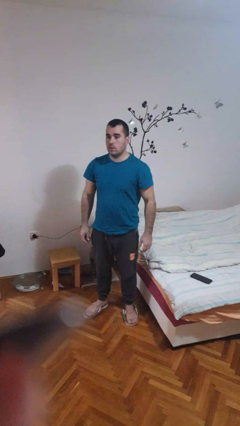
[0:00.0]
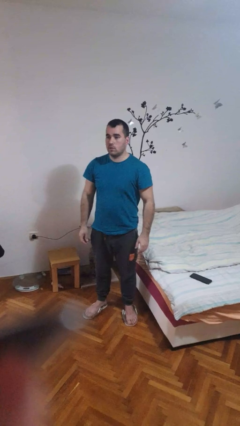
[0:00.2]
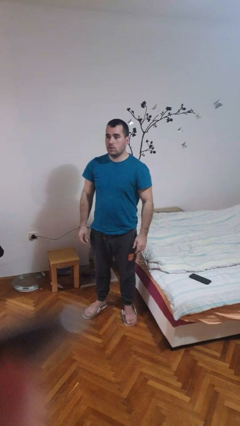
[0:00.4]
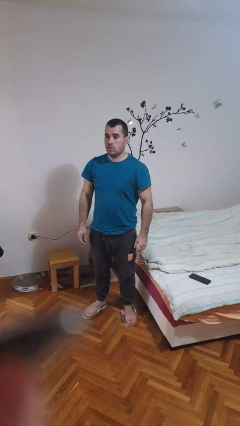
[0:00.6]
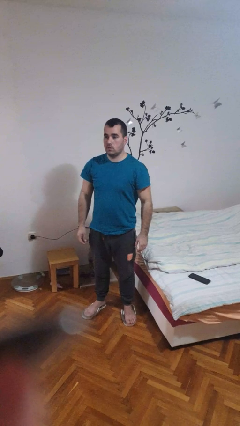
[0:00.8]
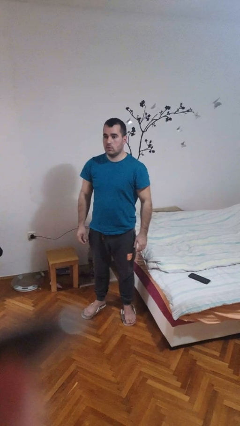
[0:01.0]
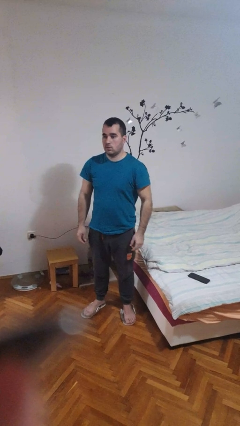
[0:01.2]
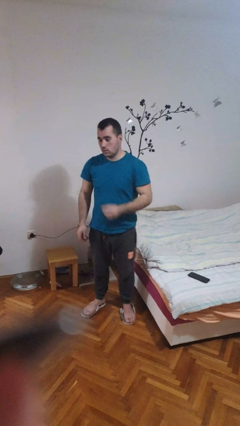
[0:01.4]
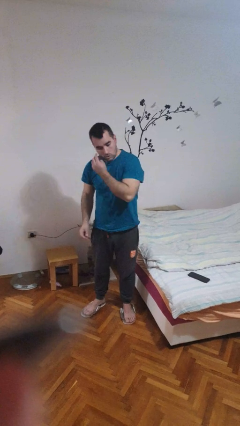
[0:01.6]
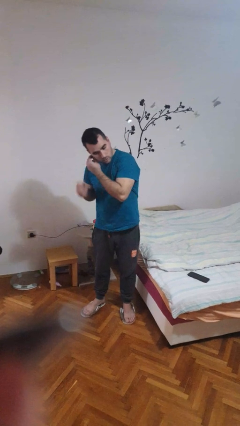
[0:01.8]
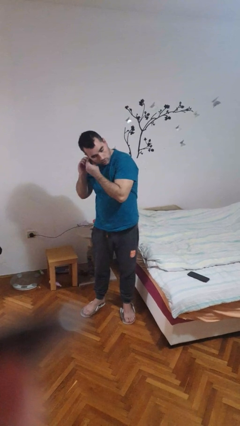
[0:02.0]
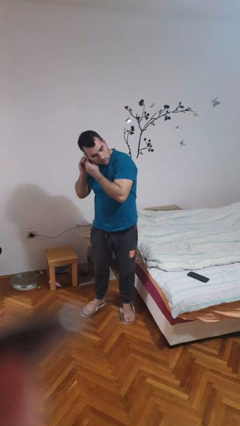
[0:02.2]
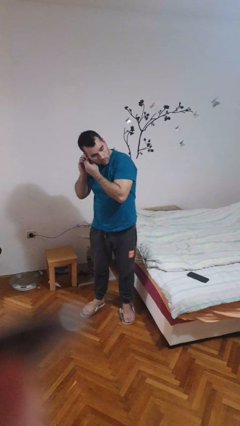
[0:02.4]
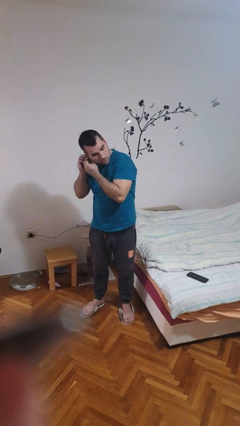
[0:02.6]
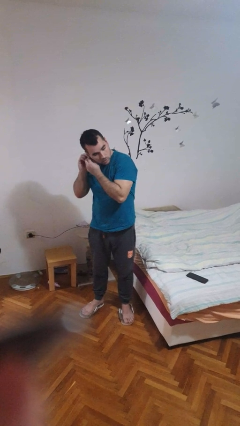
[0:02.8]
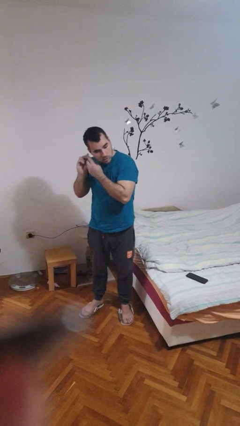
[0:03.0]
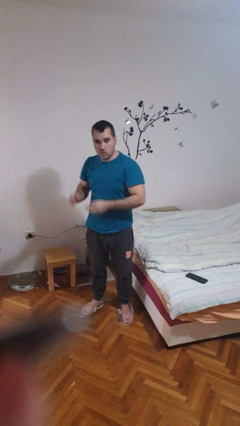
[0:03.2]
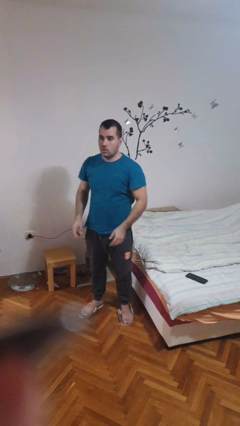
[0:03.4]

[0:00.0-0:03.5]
person puts on earrings

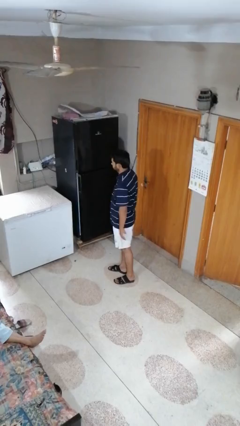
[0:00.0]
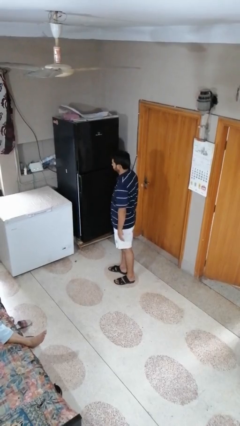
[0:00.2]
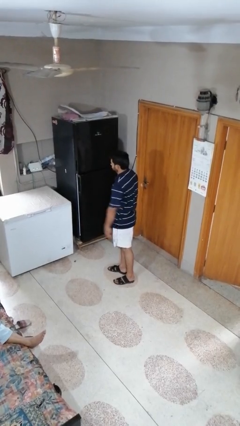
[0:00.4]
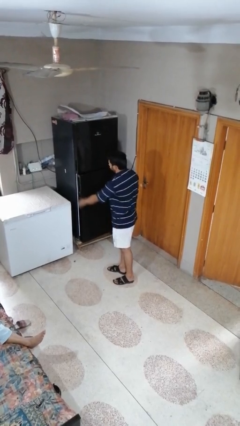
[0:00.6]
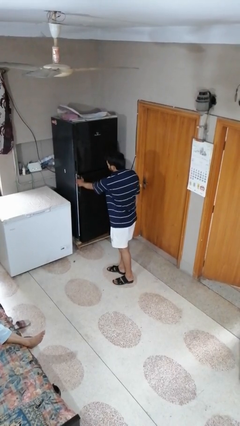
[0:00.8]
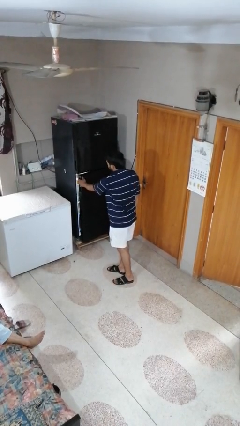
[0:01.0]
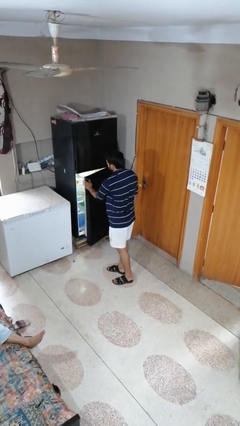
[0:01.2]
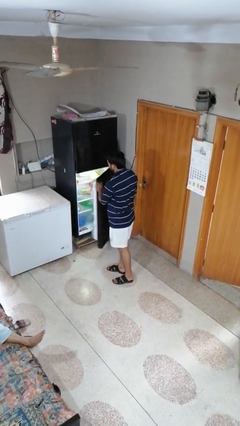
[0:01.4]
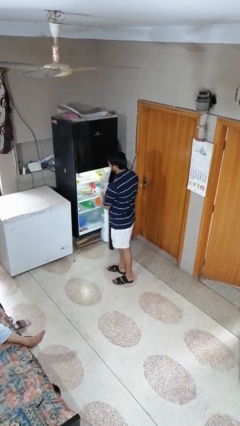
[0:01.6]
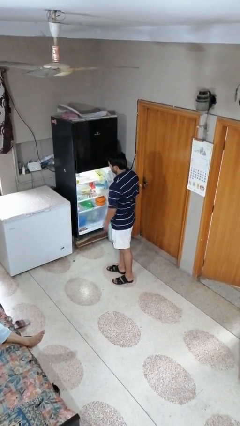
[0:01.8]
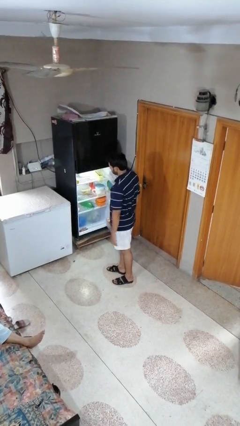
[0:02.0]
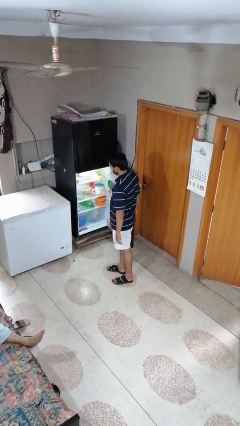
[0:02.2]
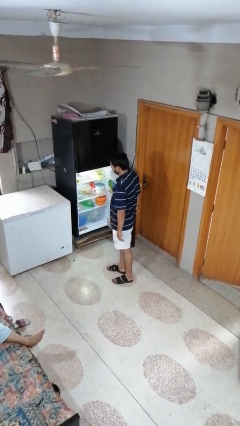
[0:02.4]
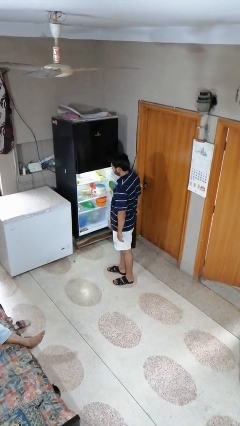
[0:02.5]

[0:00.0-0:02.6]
person opens refrigerator

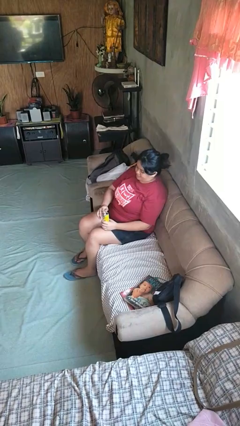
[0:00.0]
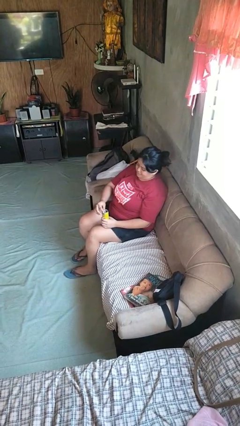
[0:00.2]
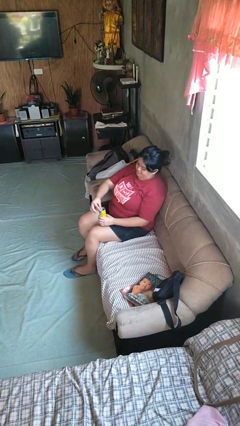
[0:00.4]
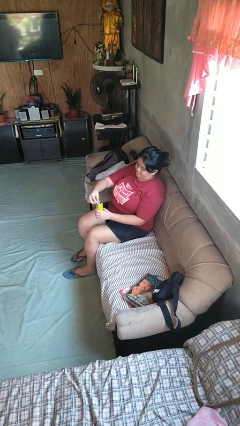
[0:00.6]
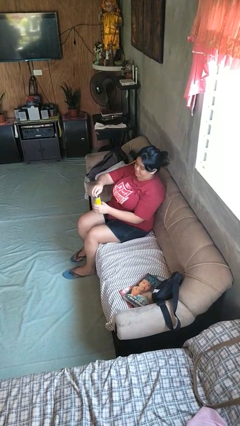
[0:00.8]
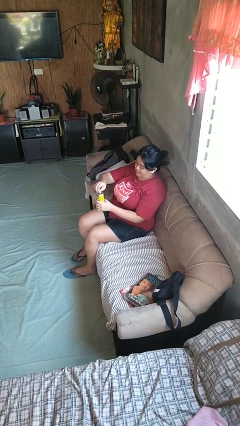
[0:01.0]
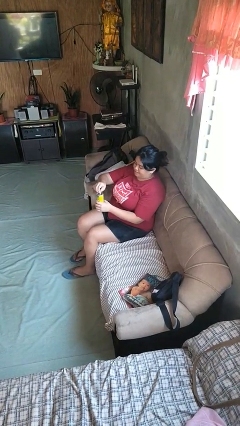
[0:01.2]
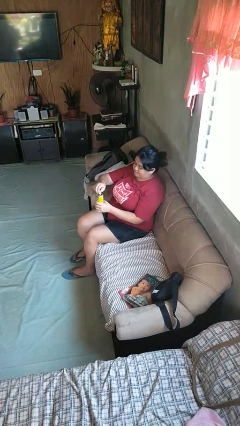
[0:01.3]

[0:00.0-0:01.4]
person opens beverage can

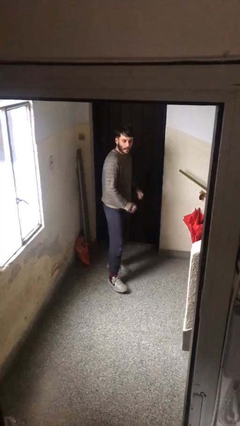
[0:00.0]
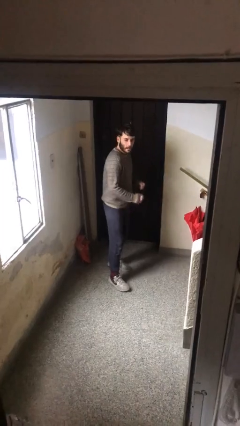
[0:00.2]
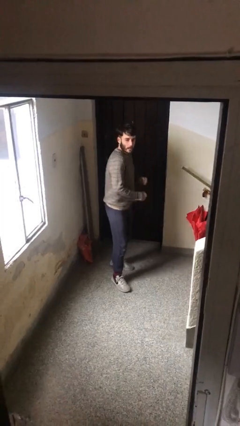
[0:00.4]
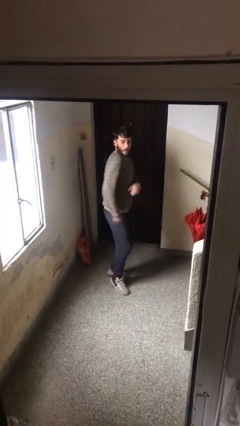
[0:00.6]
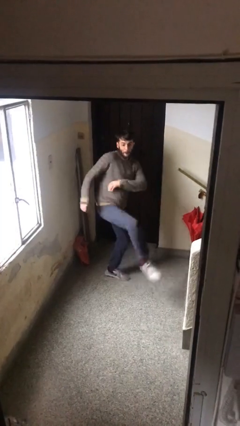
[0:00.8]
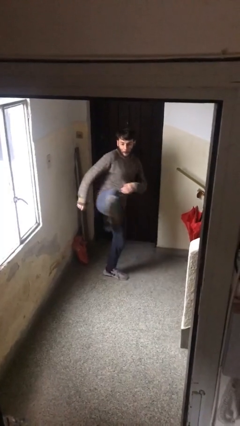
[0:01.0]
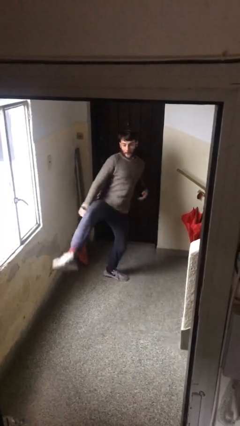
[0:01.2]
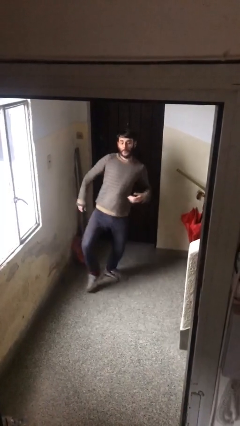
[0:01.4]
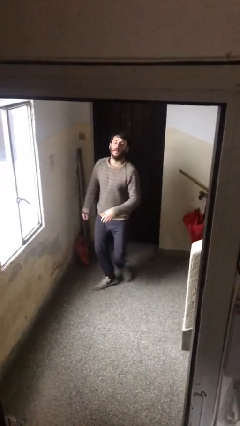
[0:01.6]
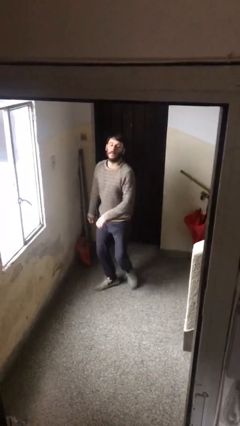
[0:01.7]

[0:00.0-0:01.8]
person karate kicks

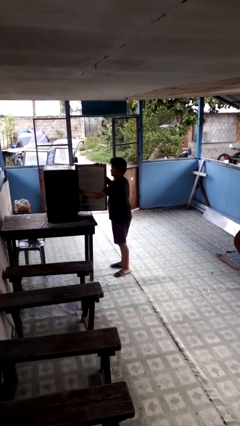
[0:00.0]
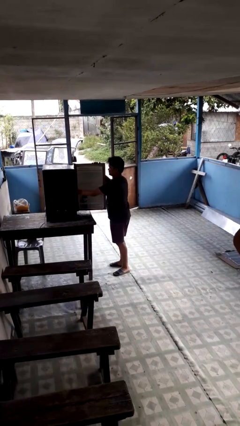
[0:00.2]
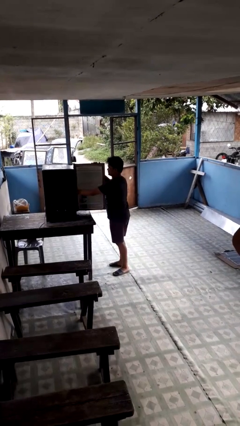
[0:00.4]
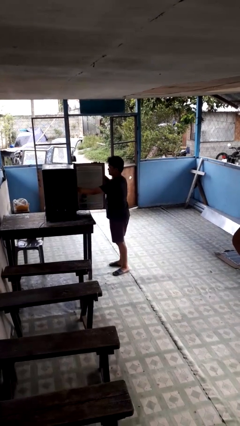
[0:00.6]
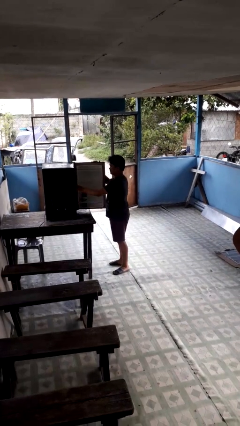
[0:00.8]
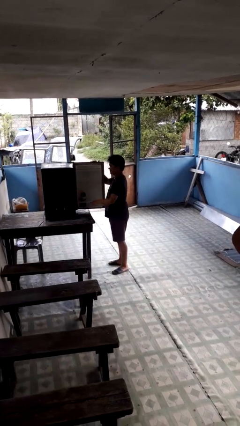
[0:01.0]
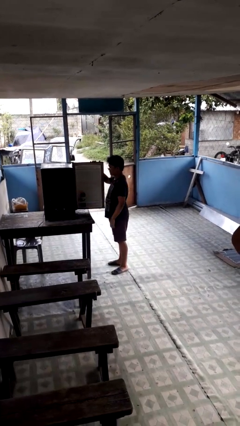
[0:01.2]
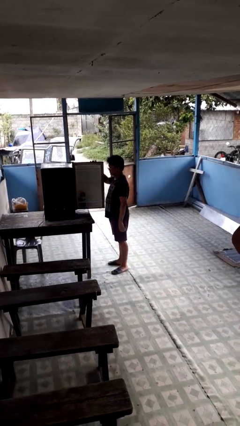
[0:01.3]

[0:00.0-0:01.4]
person puts object into refrigerator

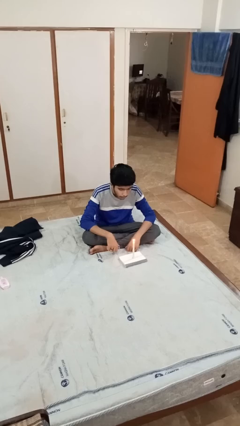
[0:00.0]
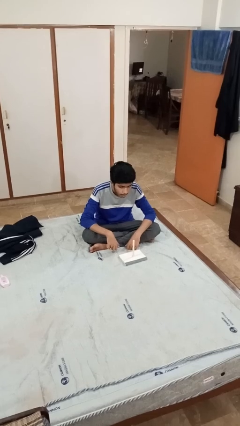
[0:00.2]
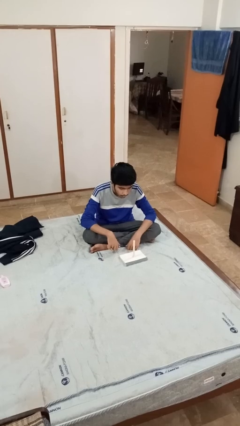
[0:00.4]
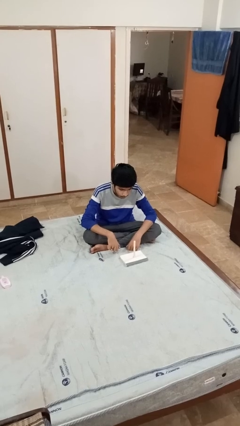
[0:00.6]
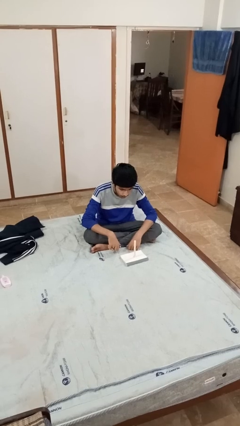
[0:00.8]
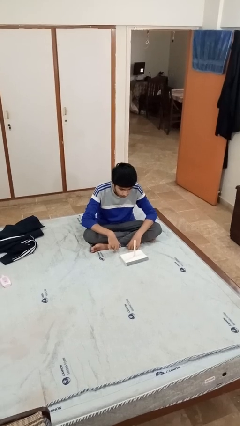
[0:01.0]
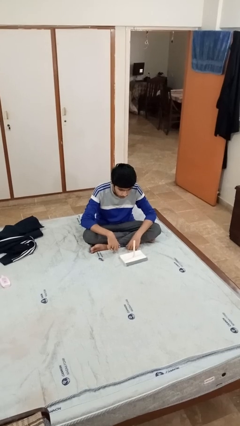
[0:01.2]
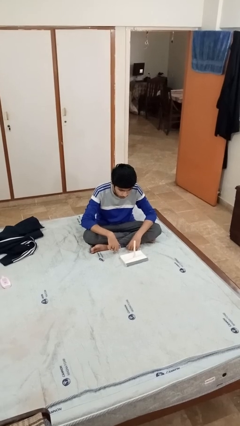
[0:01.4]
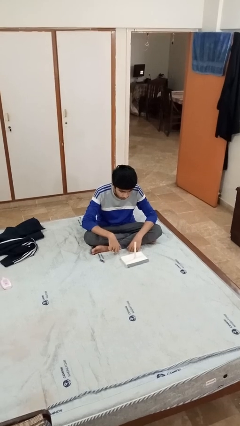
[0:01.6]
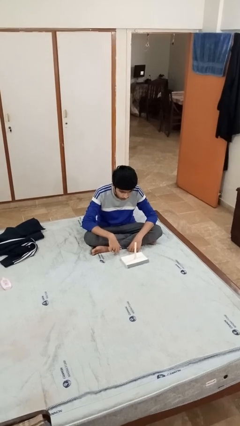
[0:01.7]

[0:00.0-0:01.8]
person extinguishes candle

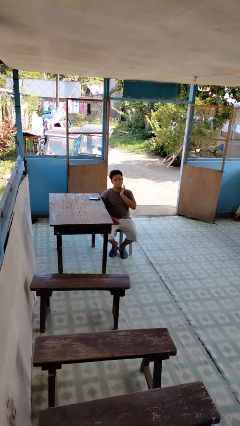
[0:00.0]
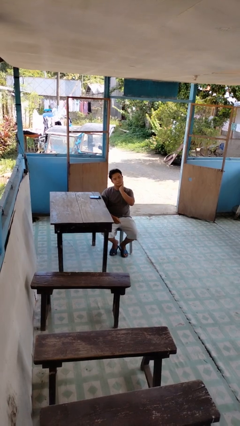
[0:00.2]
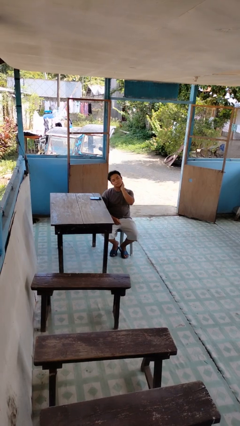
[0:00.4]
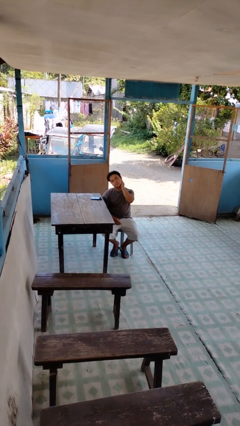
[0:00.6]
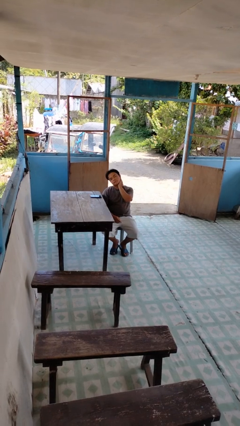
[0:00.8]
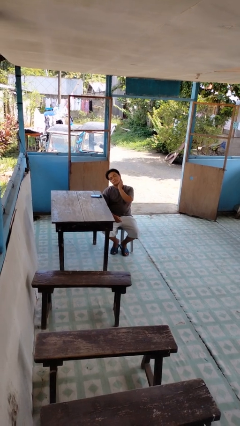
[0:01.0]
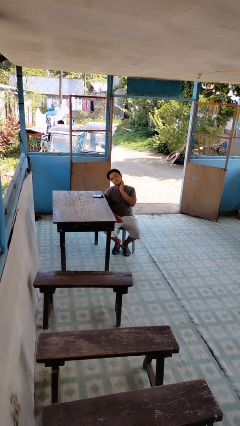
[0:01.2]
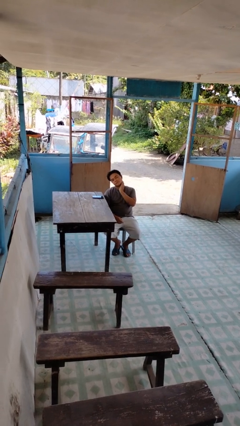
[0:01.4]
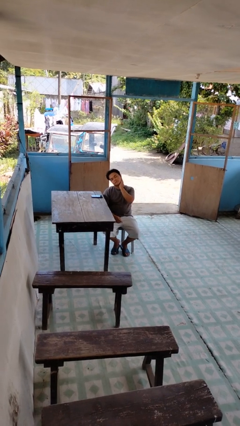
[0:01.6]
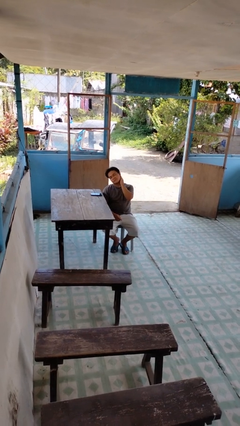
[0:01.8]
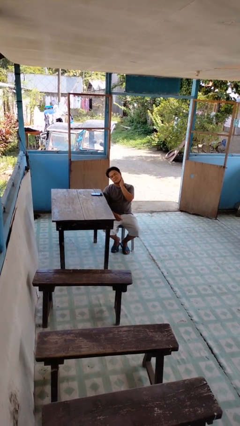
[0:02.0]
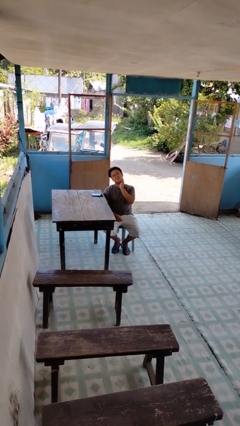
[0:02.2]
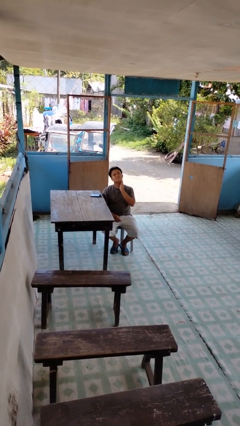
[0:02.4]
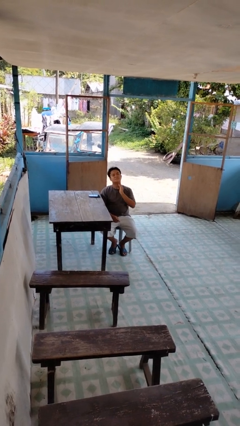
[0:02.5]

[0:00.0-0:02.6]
person rubs neck

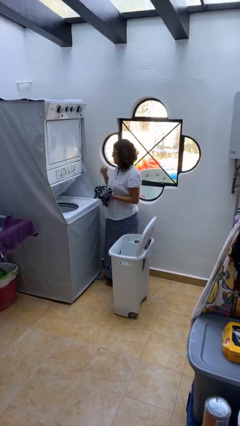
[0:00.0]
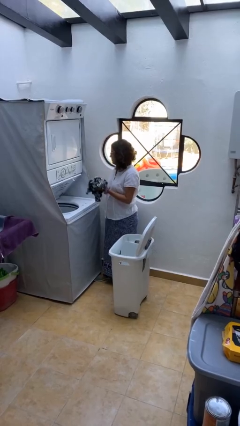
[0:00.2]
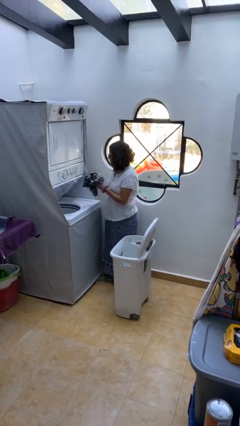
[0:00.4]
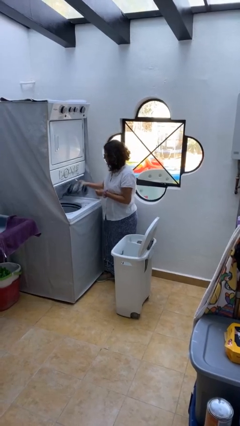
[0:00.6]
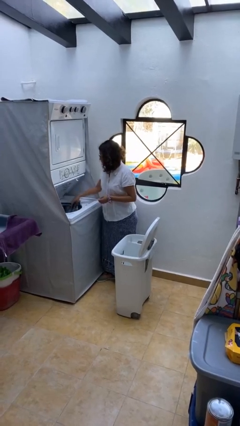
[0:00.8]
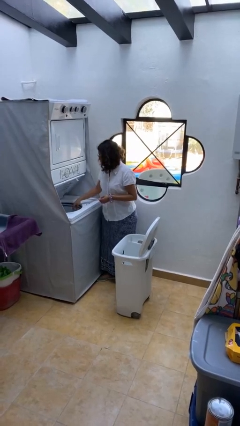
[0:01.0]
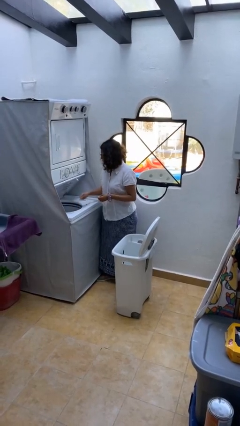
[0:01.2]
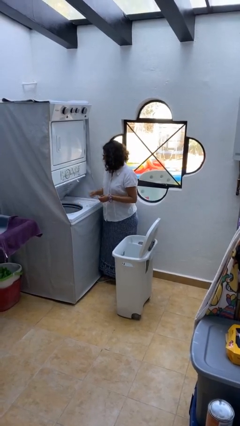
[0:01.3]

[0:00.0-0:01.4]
person loads clotheswasher

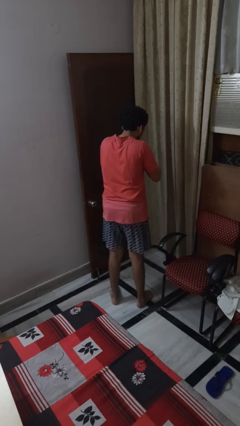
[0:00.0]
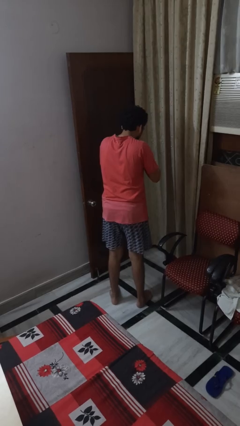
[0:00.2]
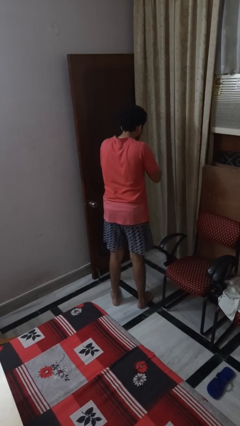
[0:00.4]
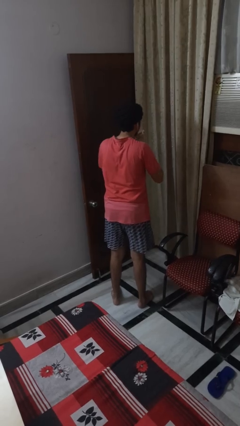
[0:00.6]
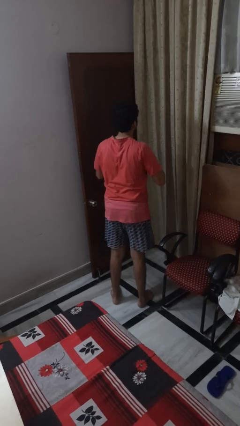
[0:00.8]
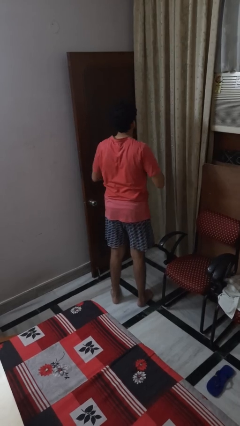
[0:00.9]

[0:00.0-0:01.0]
person sneezes into hand
